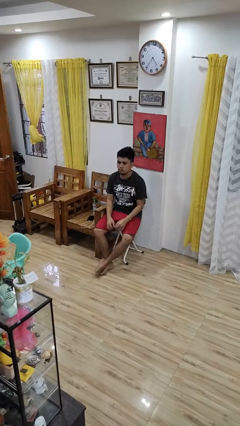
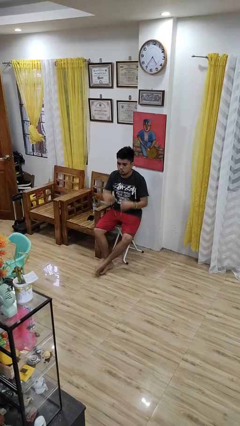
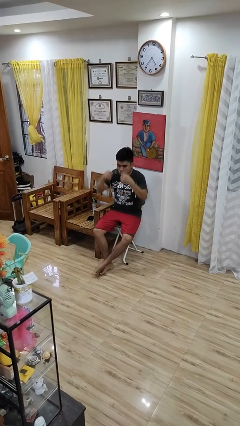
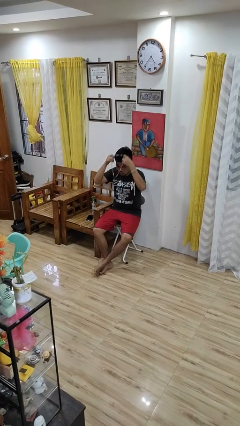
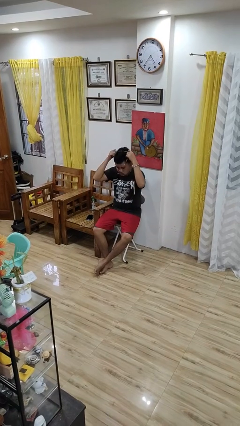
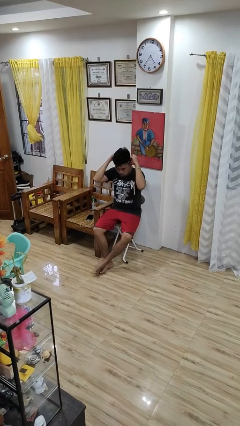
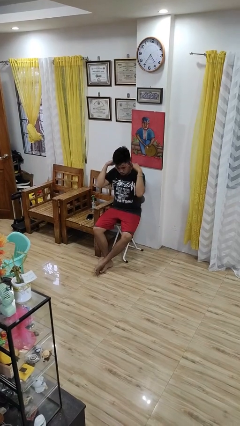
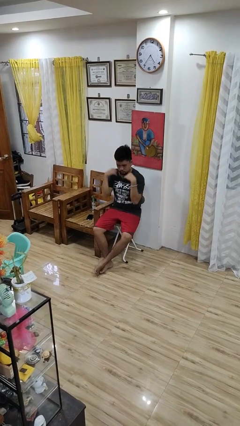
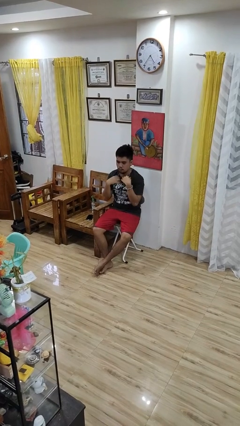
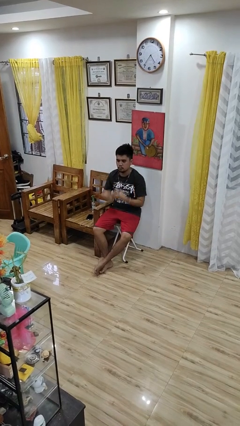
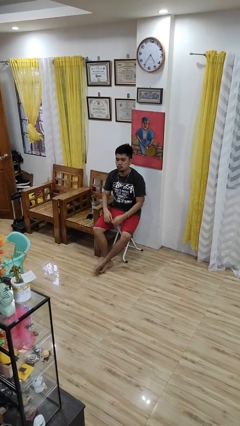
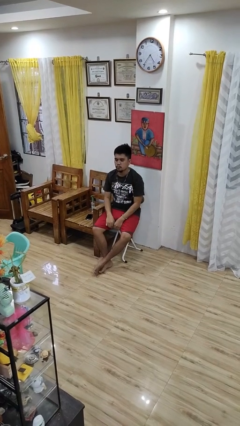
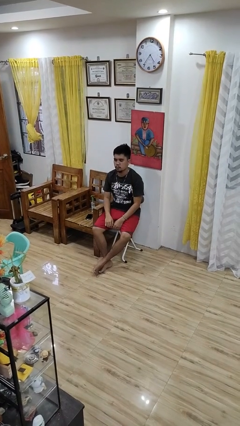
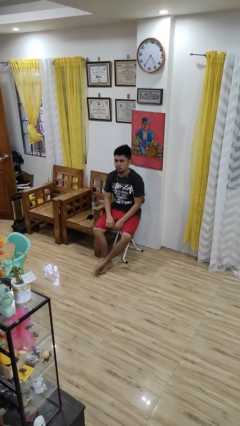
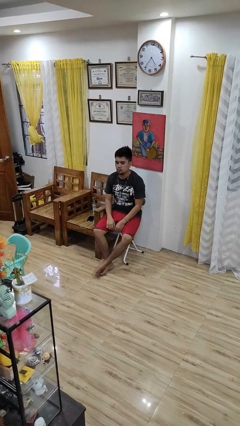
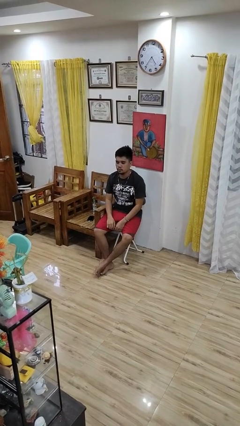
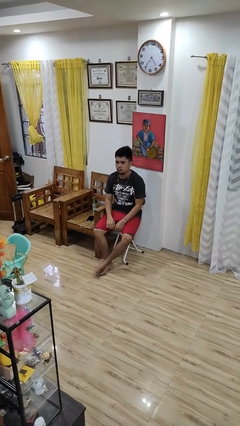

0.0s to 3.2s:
person puts on necklace

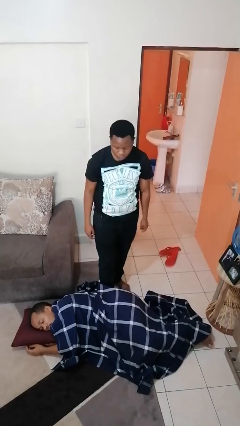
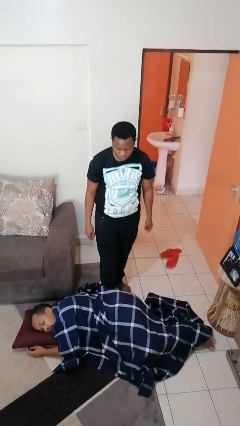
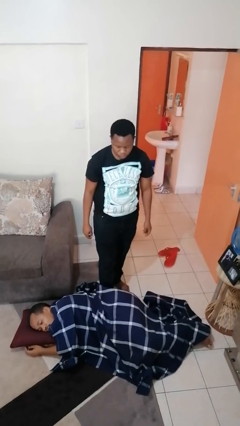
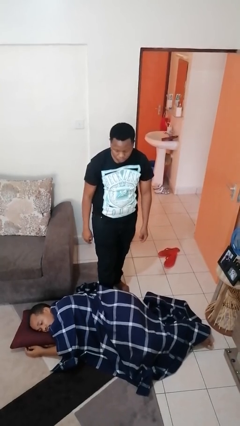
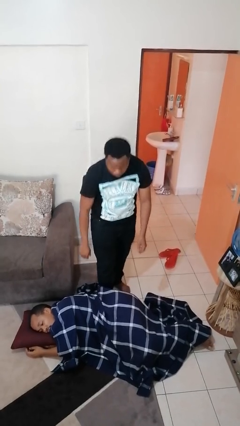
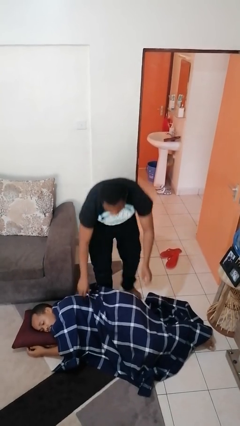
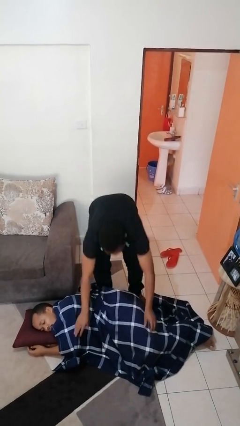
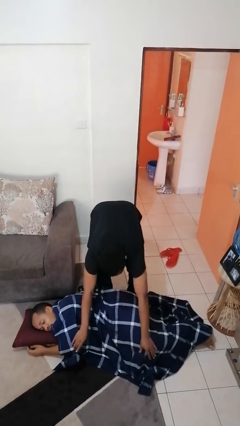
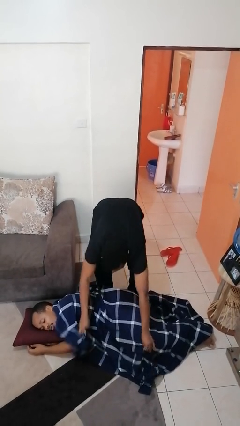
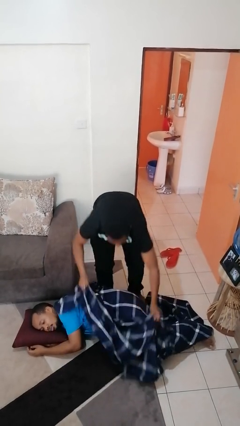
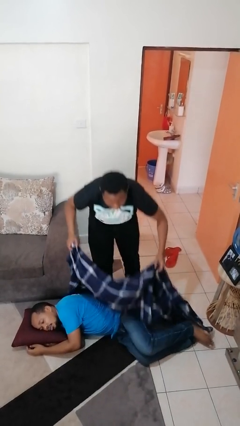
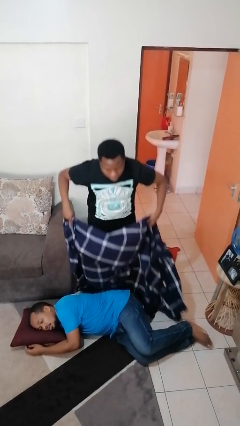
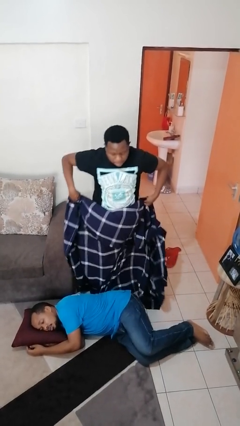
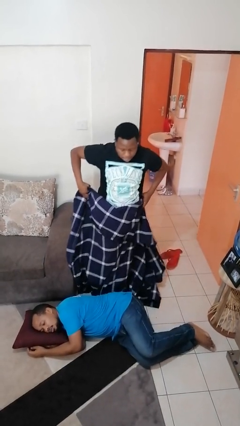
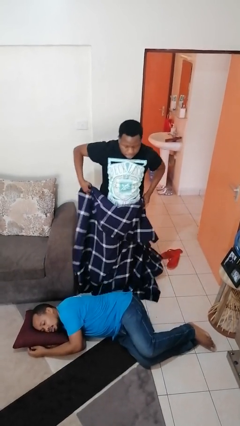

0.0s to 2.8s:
person uncovers friend with blanket

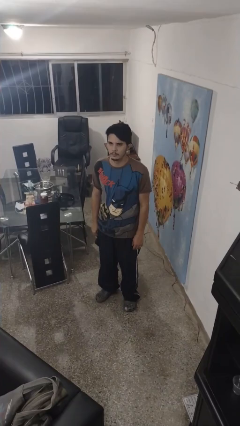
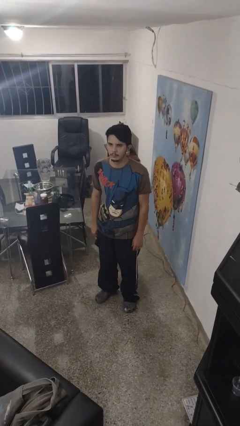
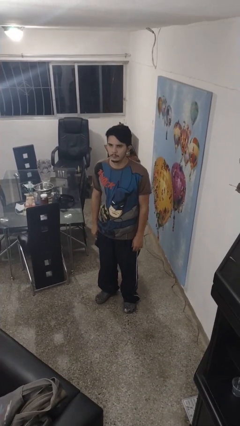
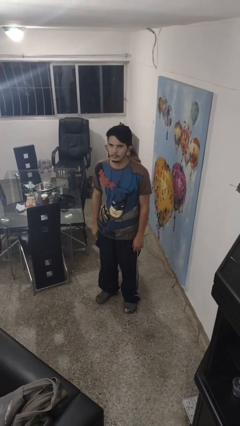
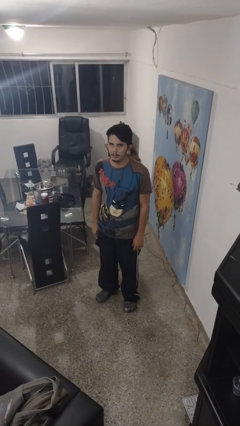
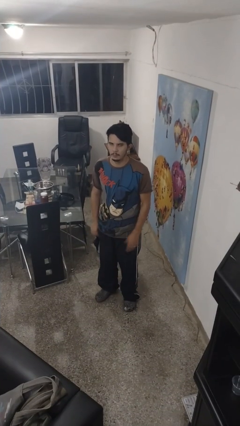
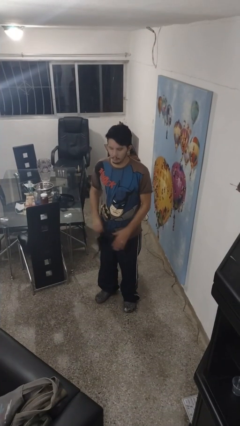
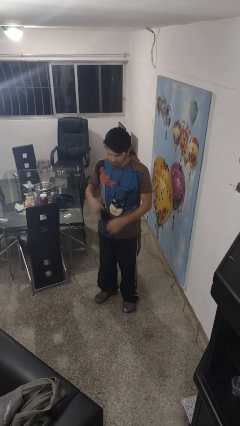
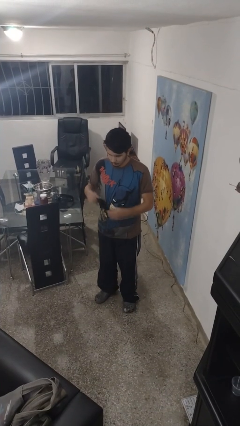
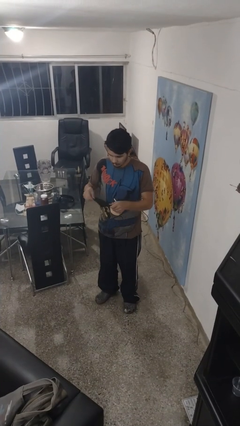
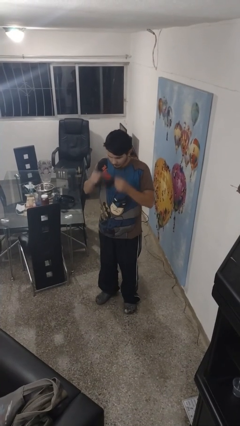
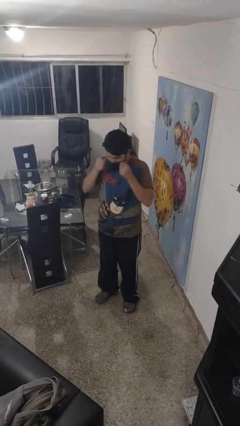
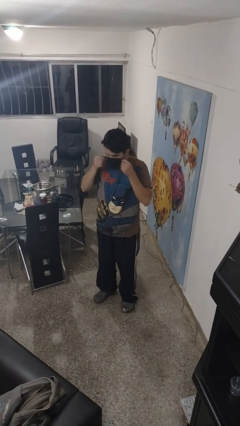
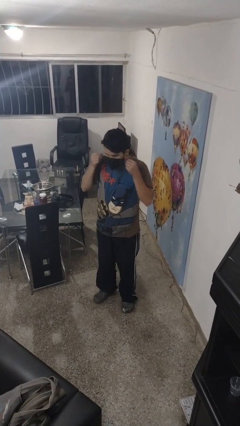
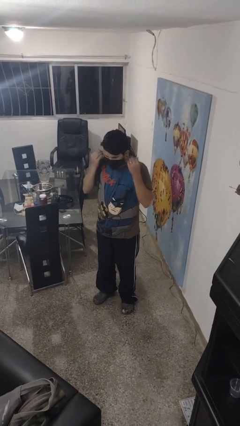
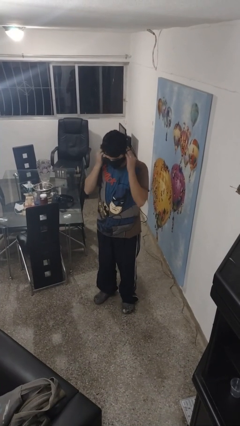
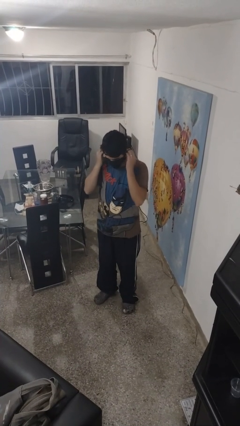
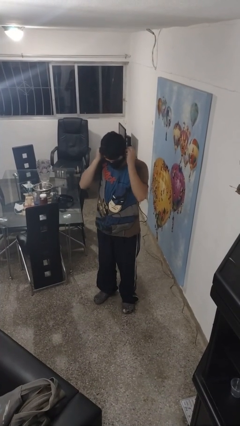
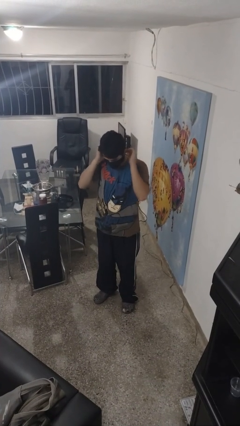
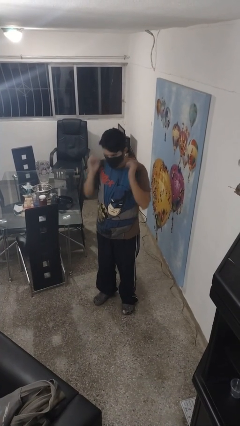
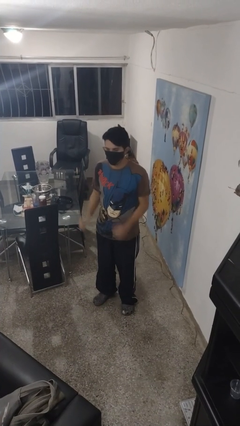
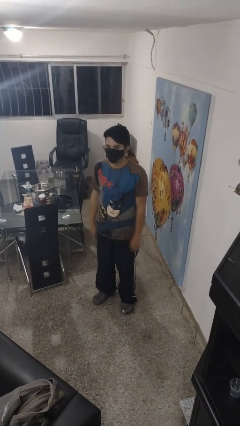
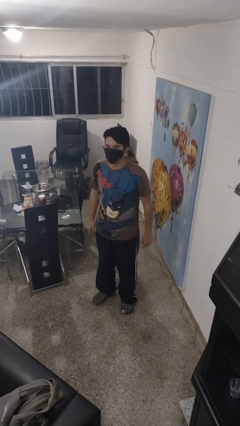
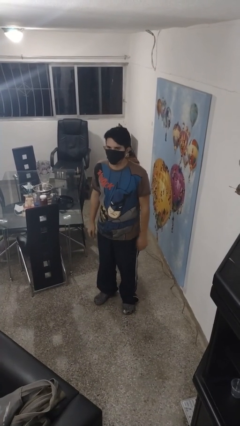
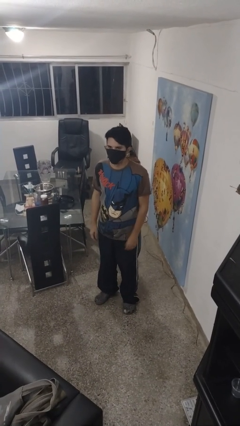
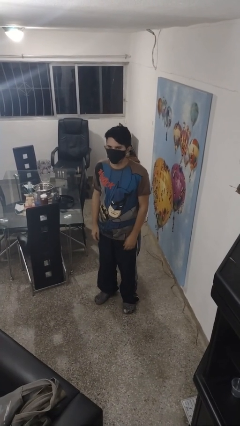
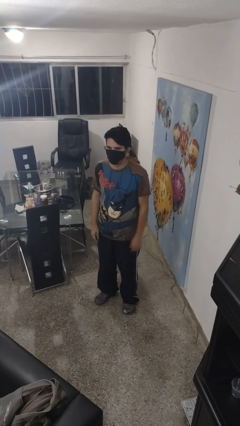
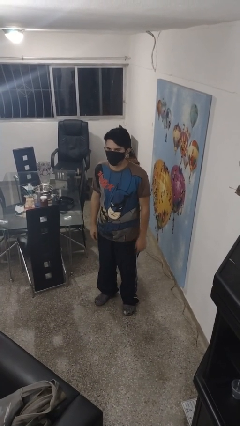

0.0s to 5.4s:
person puts on facemask

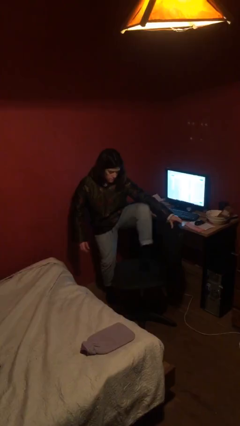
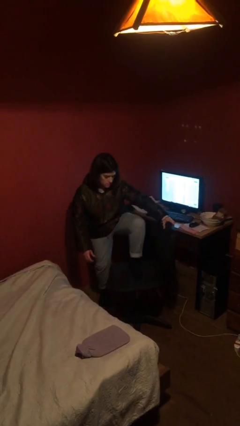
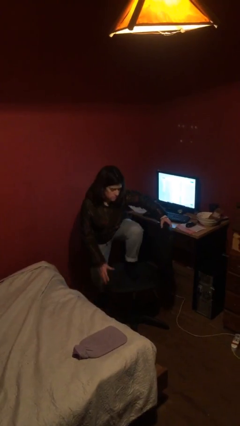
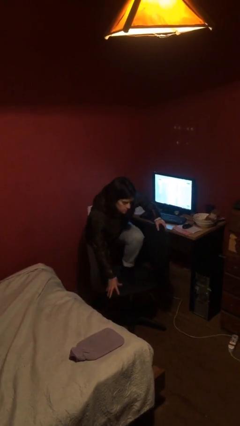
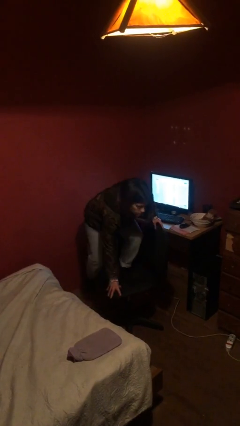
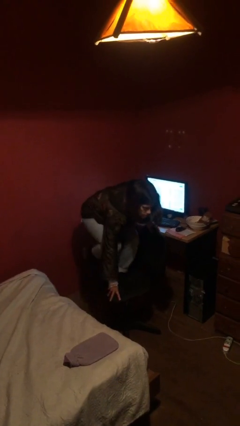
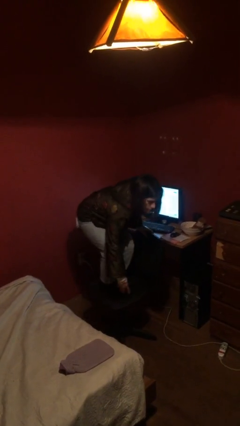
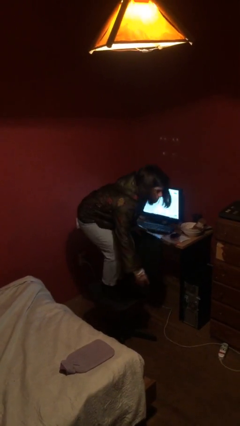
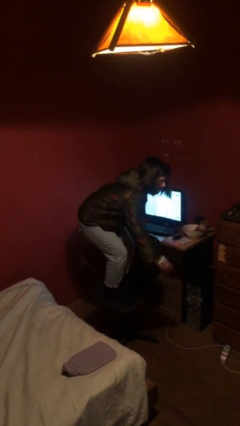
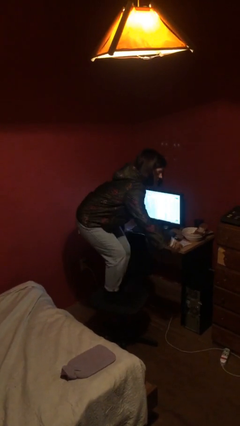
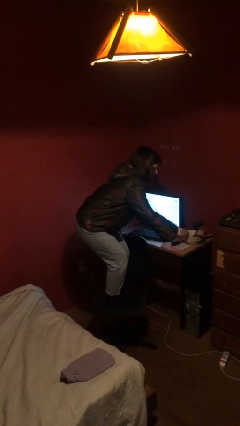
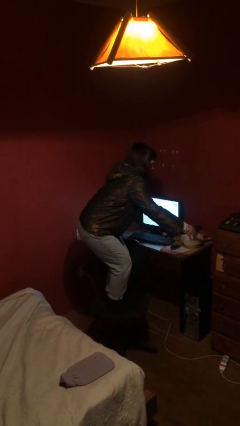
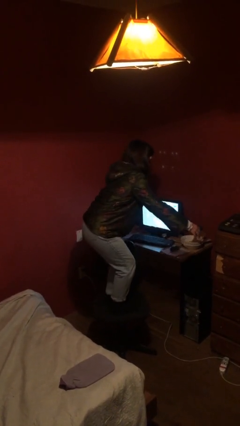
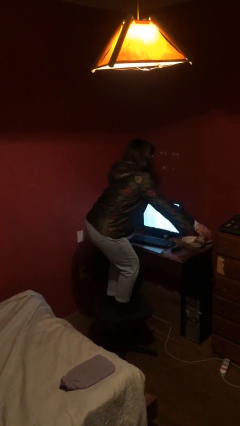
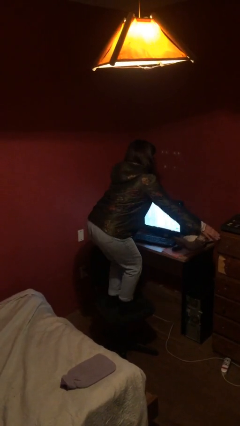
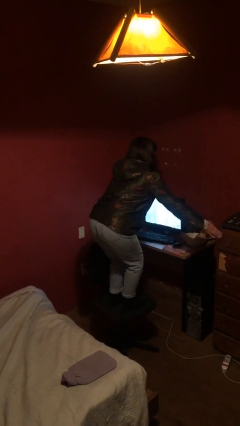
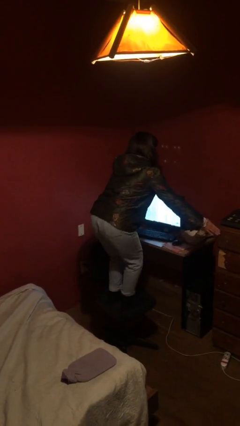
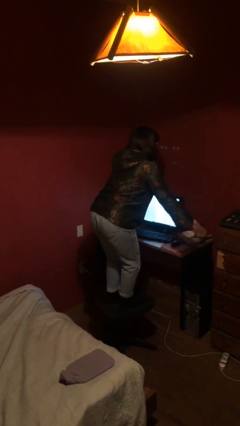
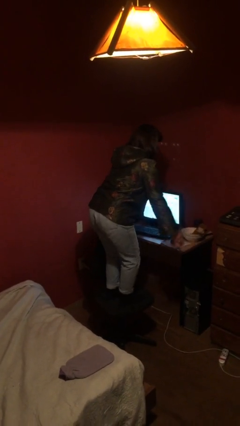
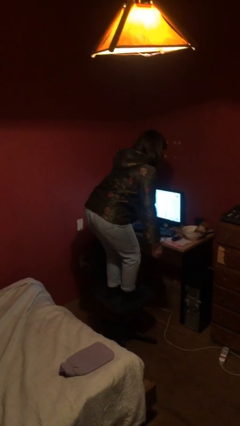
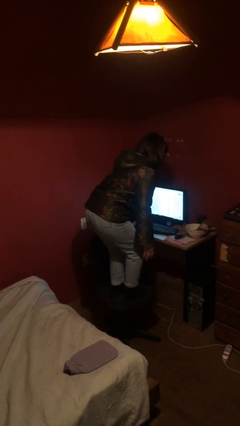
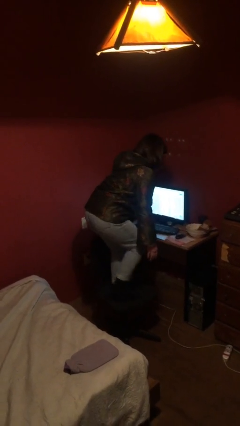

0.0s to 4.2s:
person climbs on chair

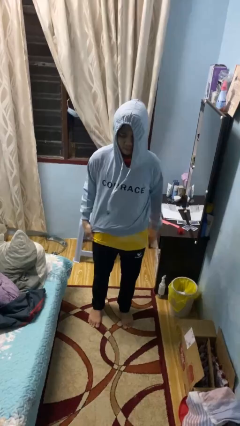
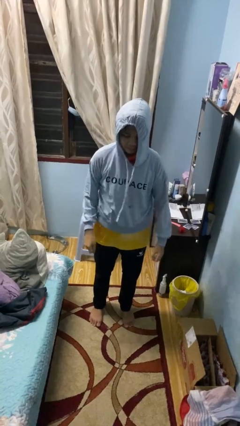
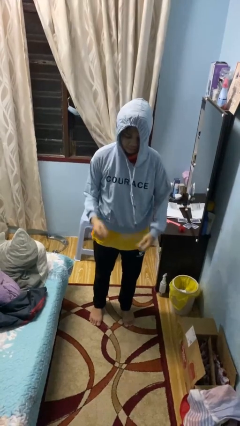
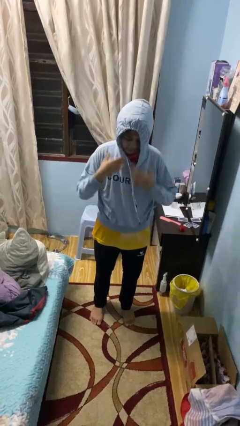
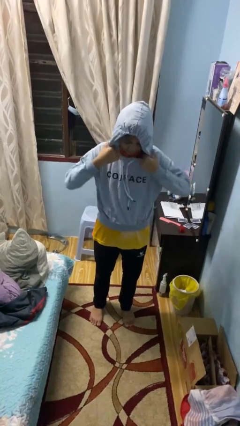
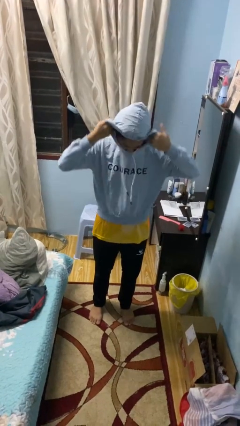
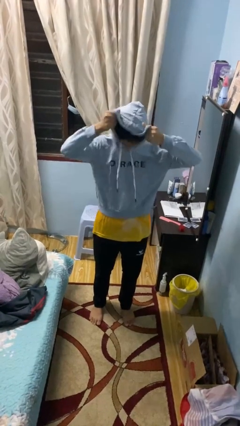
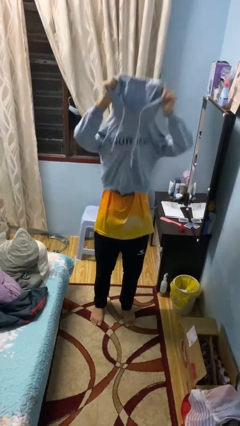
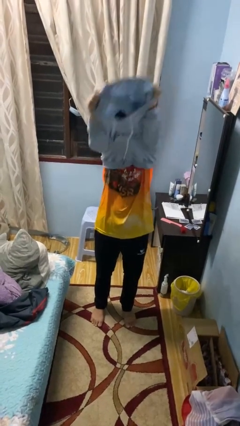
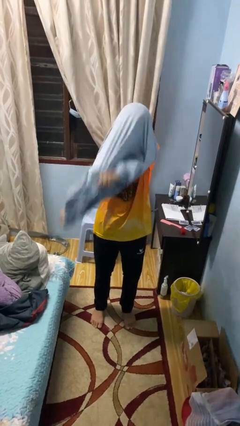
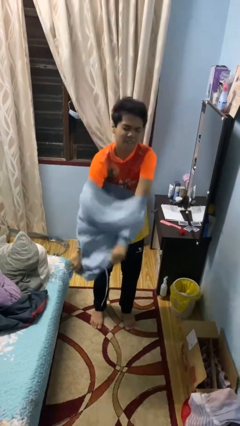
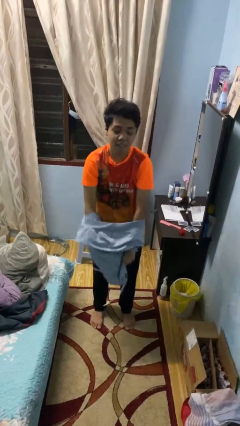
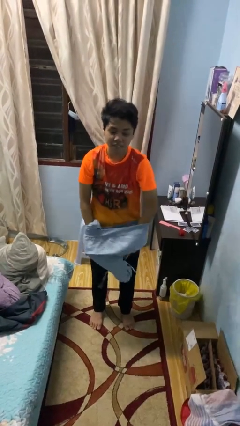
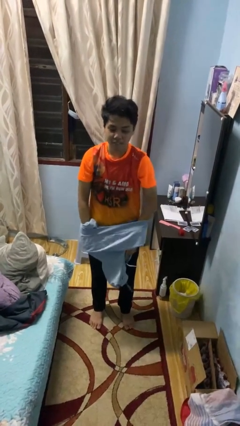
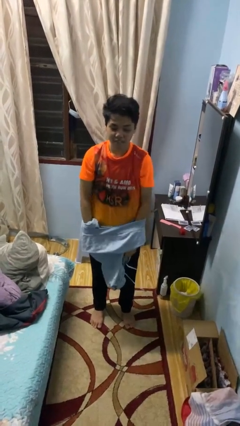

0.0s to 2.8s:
person takes off hoodie
